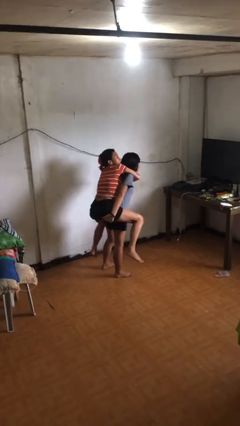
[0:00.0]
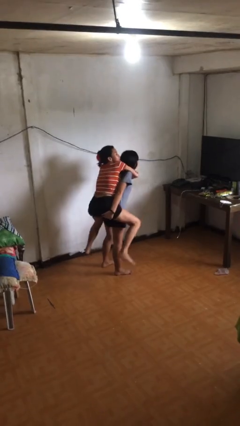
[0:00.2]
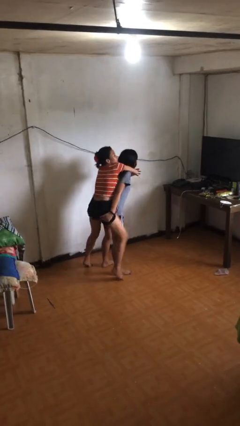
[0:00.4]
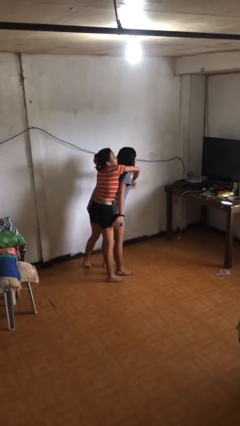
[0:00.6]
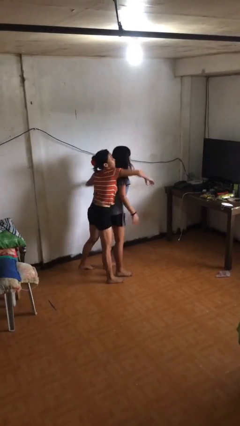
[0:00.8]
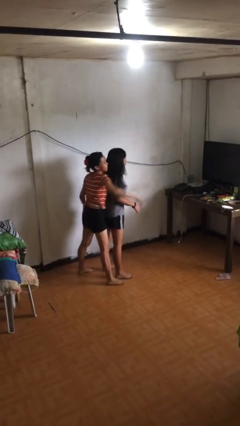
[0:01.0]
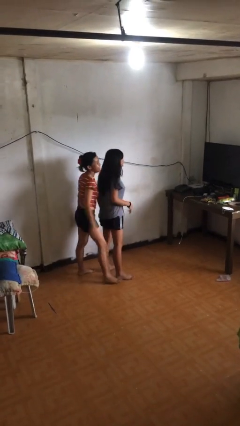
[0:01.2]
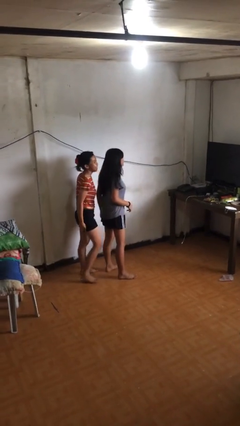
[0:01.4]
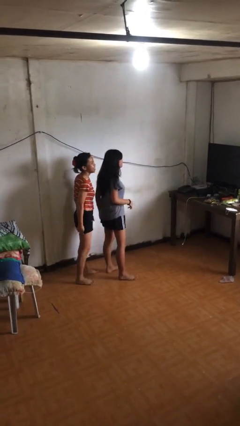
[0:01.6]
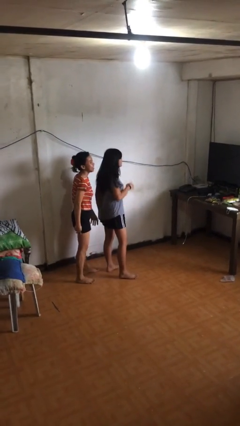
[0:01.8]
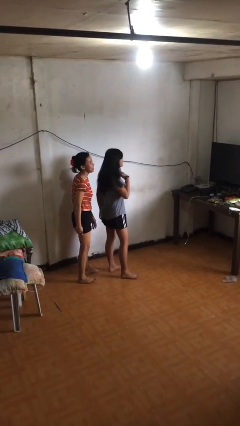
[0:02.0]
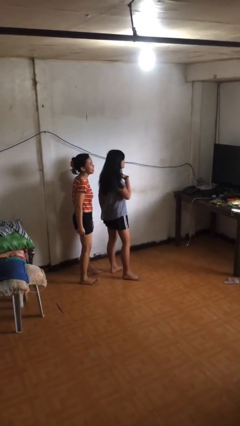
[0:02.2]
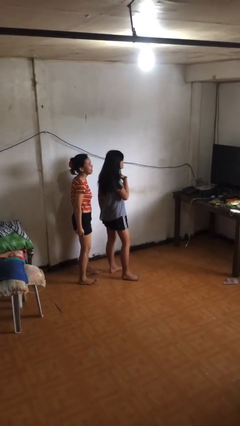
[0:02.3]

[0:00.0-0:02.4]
person puts down person

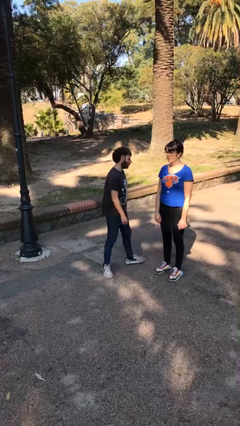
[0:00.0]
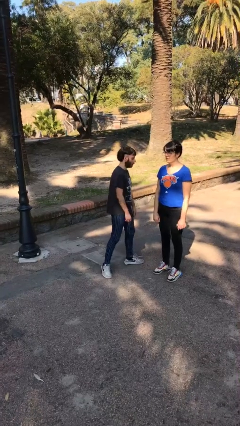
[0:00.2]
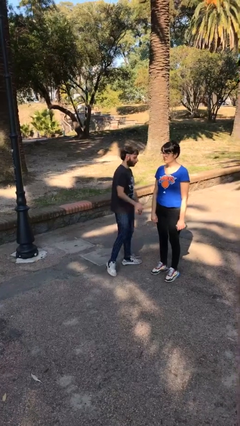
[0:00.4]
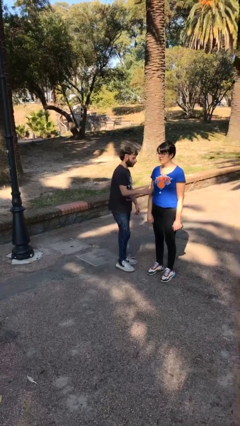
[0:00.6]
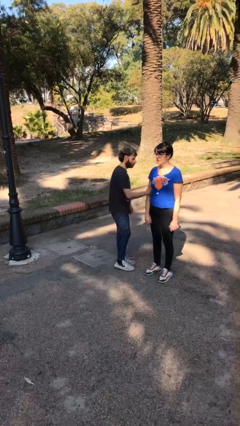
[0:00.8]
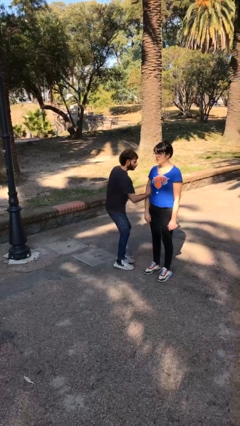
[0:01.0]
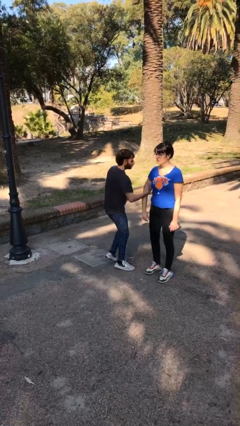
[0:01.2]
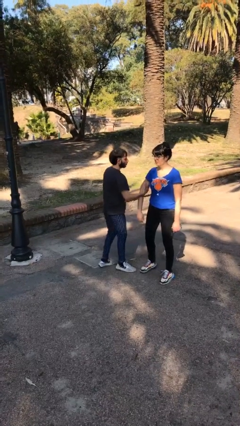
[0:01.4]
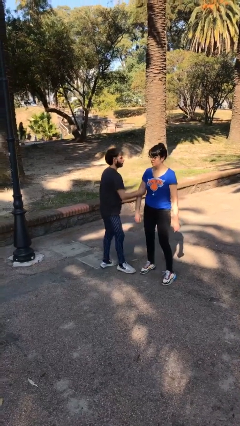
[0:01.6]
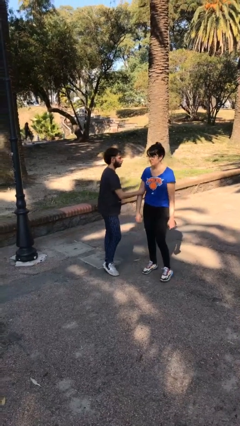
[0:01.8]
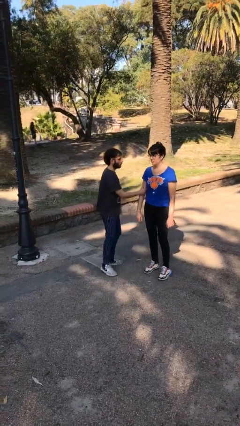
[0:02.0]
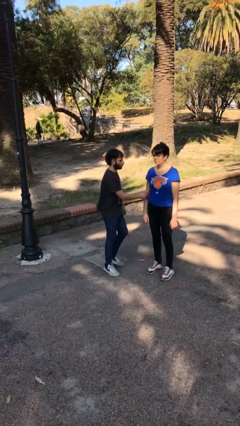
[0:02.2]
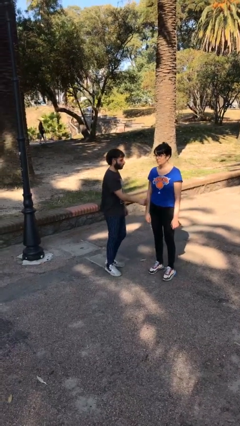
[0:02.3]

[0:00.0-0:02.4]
person grabs person by bicep

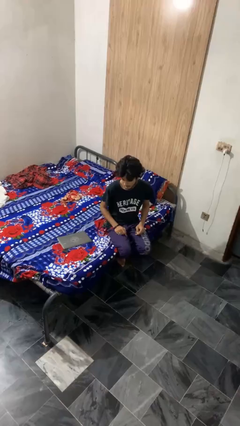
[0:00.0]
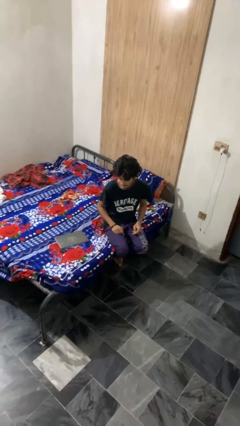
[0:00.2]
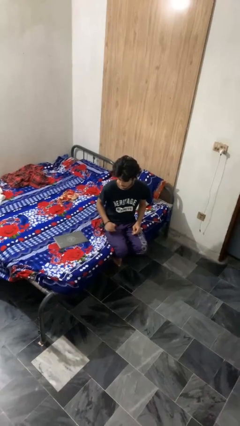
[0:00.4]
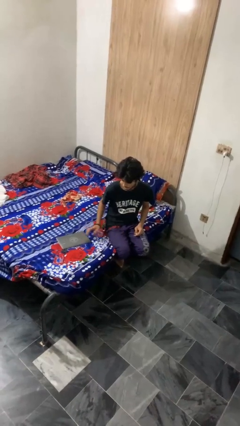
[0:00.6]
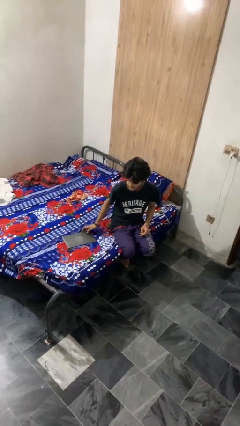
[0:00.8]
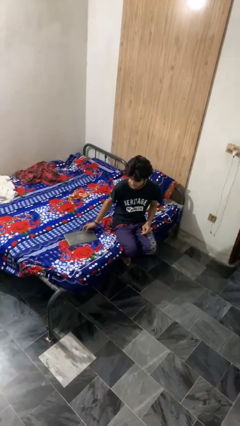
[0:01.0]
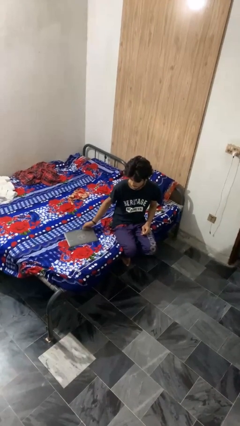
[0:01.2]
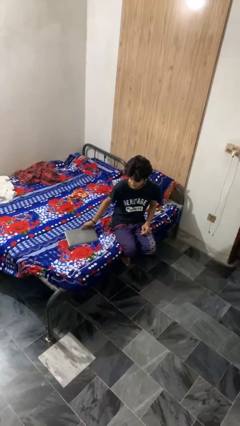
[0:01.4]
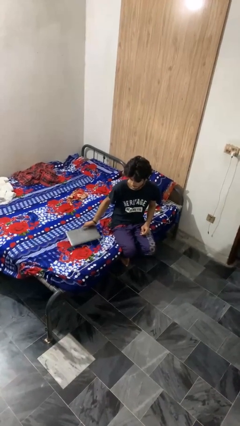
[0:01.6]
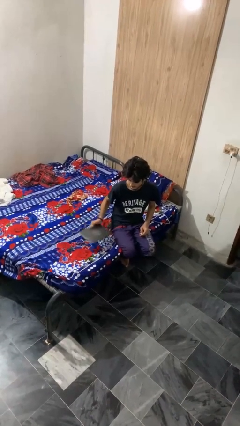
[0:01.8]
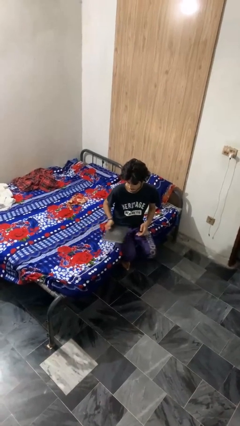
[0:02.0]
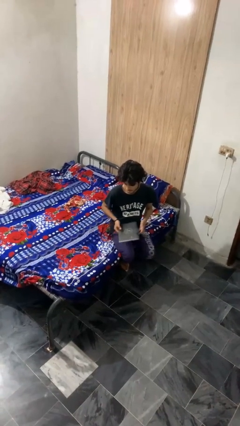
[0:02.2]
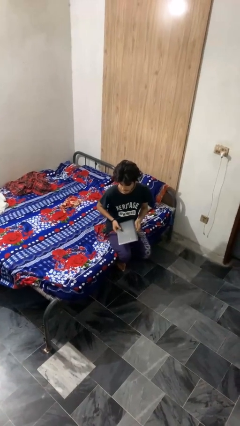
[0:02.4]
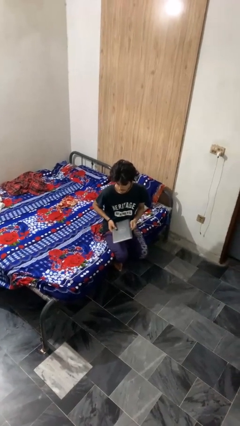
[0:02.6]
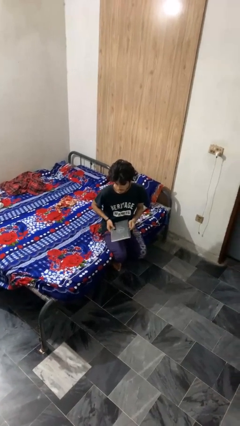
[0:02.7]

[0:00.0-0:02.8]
person picks up object from bed

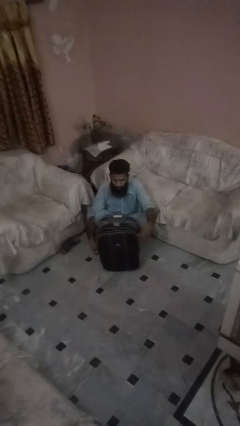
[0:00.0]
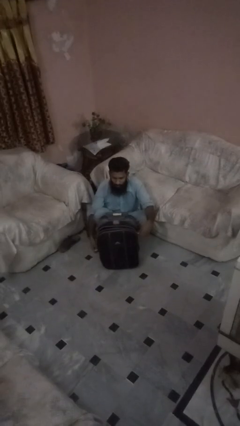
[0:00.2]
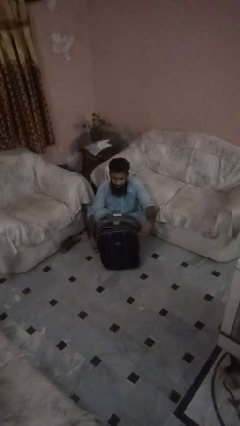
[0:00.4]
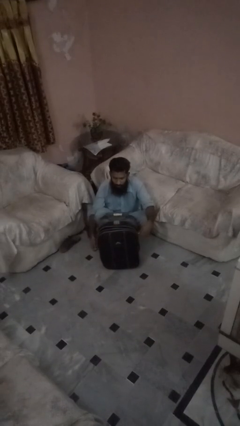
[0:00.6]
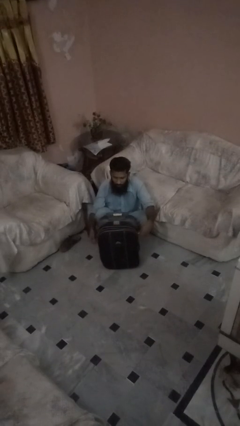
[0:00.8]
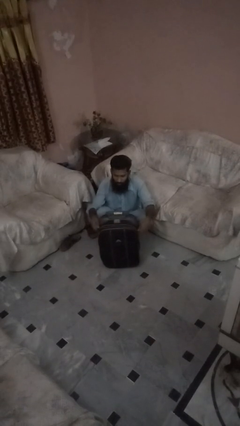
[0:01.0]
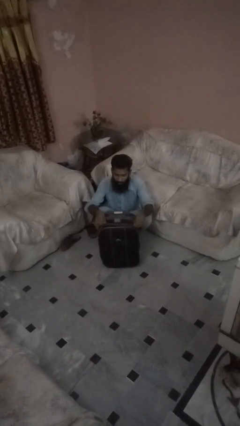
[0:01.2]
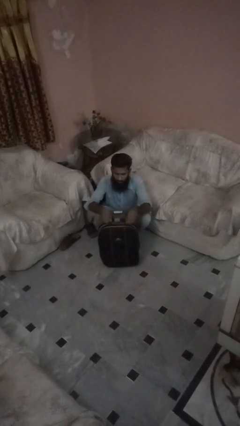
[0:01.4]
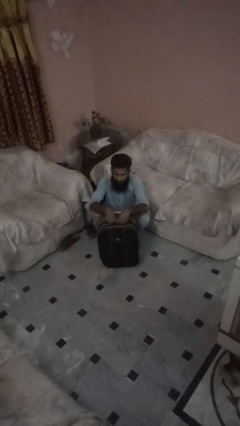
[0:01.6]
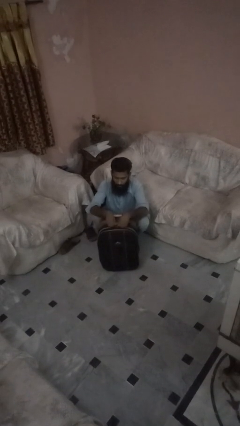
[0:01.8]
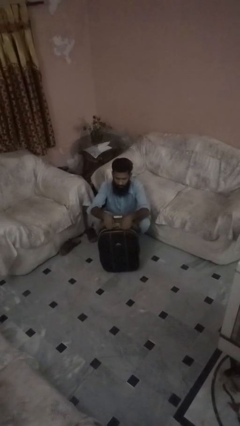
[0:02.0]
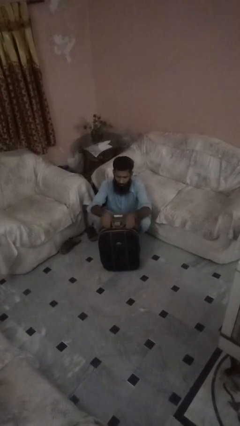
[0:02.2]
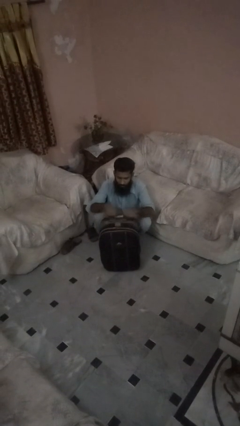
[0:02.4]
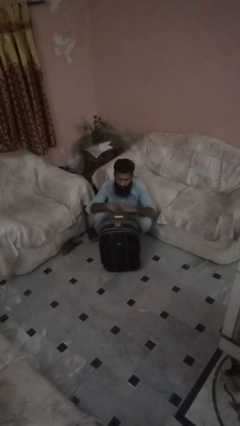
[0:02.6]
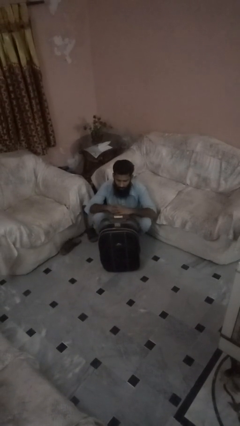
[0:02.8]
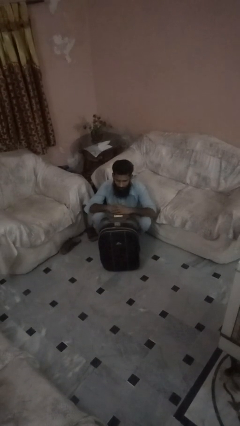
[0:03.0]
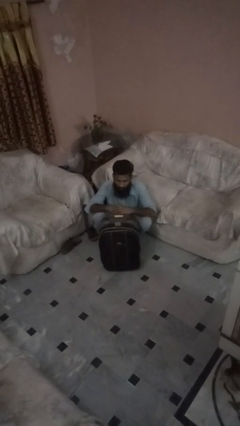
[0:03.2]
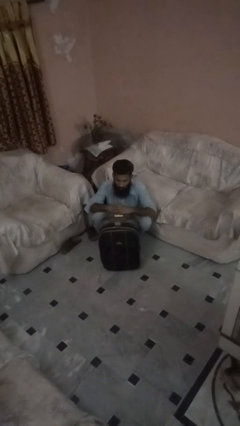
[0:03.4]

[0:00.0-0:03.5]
person closes suitcase

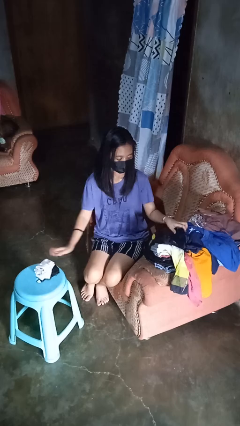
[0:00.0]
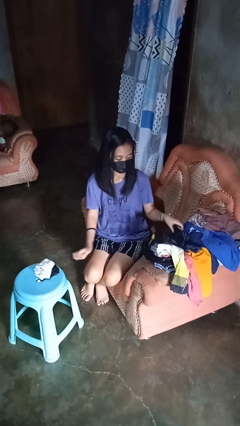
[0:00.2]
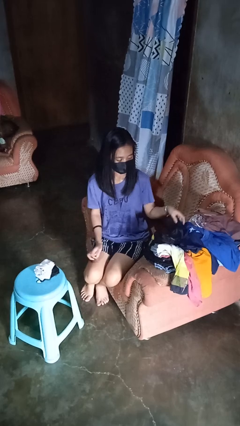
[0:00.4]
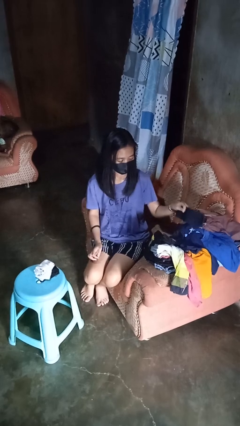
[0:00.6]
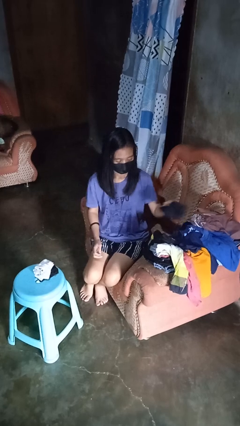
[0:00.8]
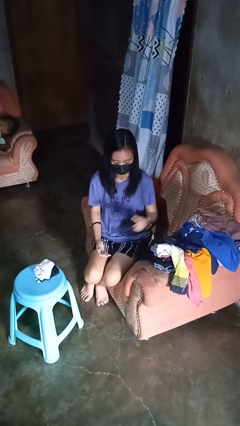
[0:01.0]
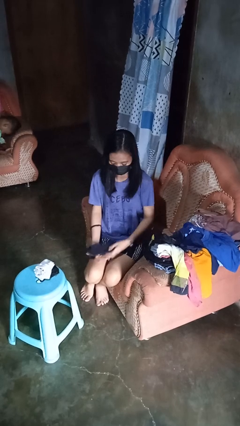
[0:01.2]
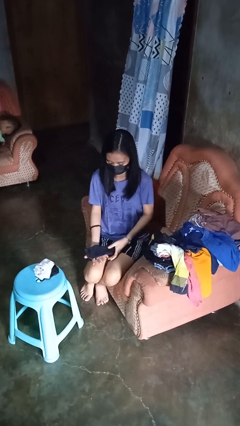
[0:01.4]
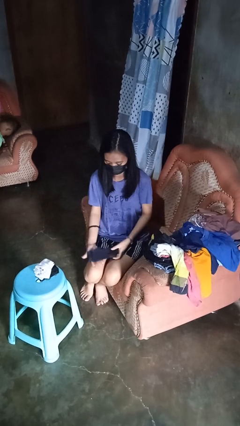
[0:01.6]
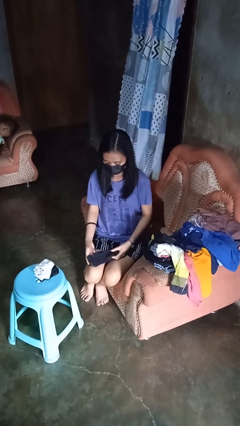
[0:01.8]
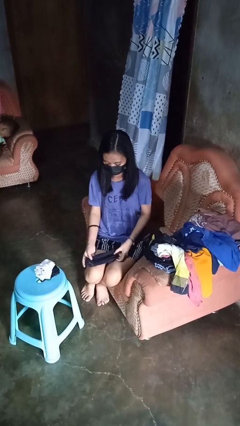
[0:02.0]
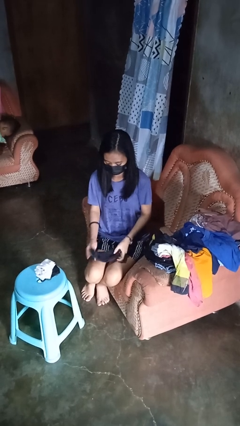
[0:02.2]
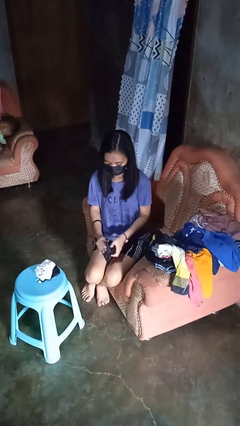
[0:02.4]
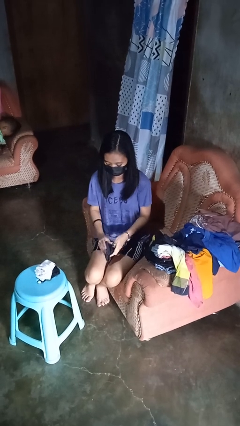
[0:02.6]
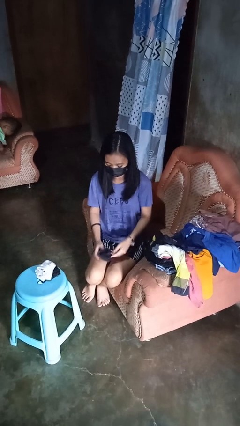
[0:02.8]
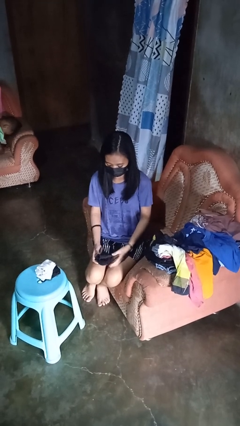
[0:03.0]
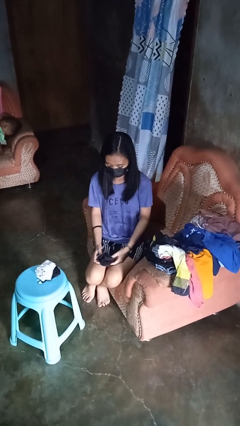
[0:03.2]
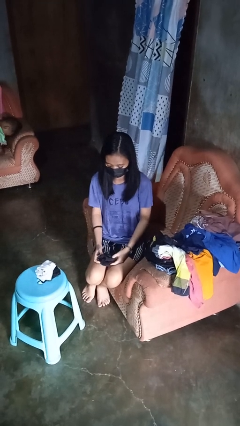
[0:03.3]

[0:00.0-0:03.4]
person folds socks

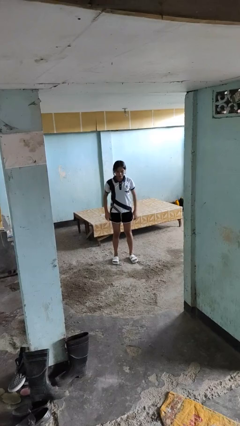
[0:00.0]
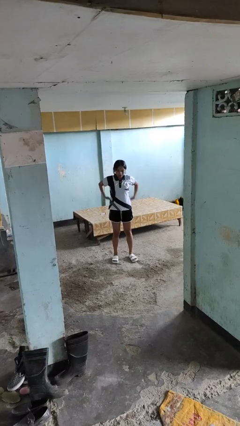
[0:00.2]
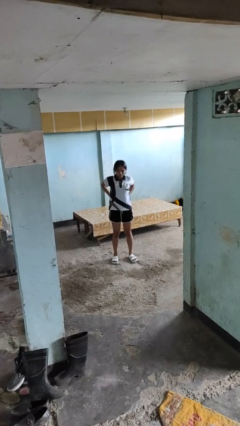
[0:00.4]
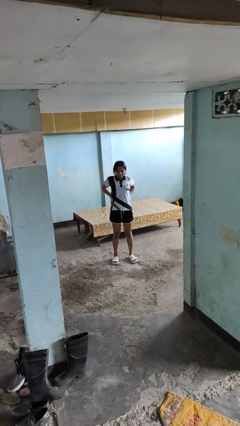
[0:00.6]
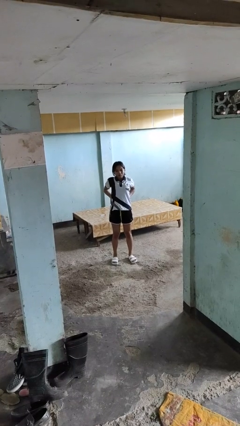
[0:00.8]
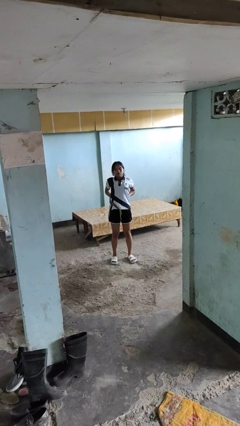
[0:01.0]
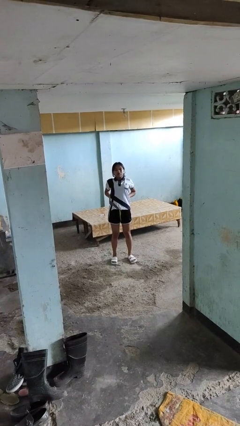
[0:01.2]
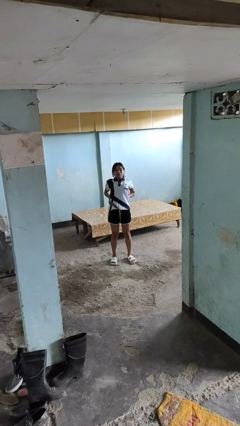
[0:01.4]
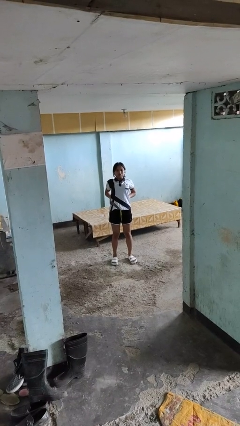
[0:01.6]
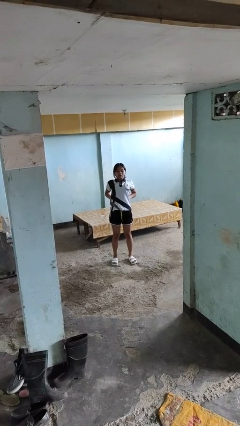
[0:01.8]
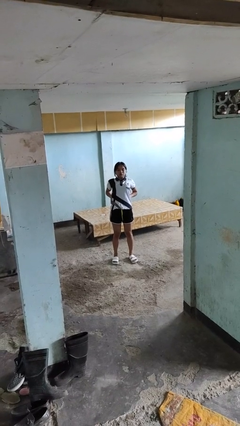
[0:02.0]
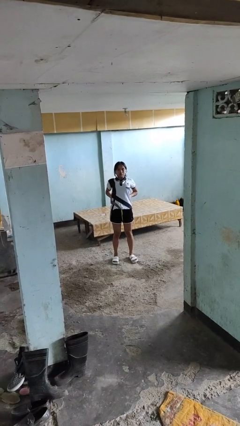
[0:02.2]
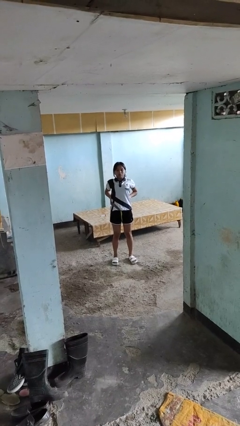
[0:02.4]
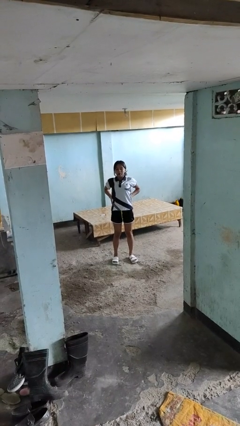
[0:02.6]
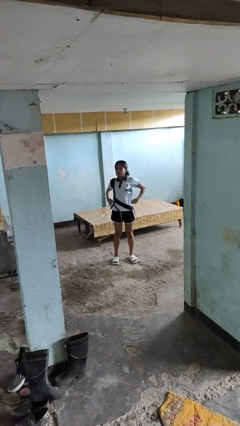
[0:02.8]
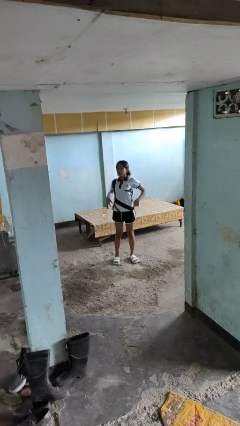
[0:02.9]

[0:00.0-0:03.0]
person stretches back
